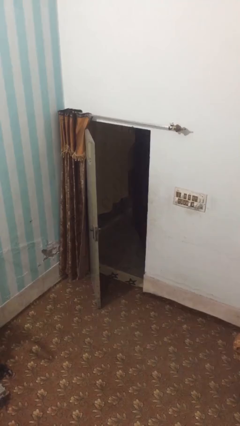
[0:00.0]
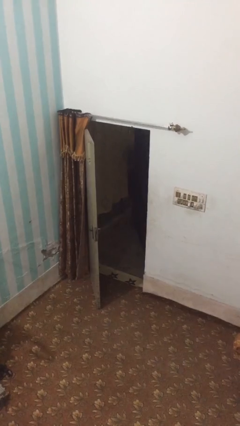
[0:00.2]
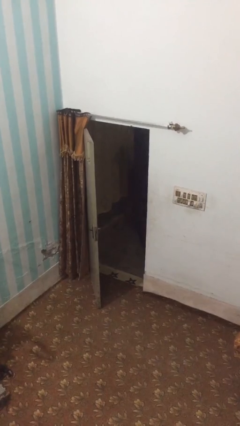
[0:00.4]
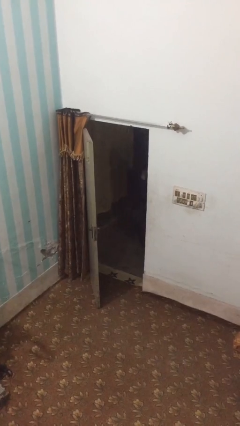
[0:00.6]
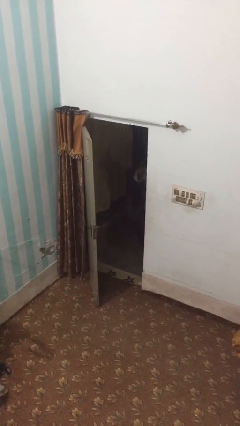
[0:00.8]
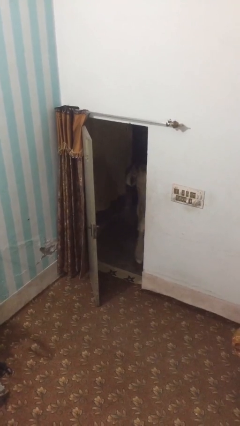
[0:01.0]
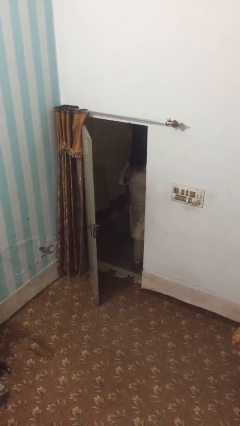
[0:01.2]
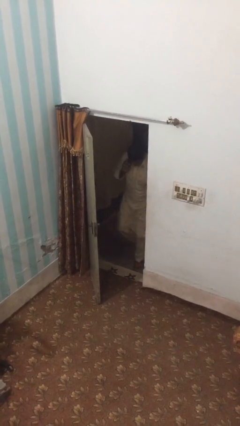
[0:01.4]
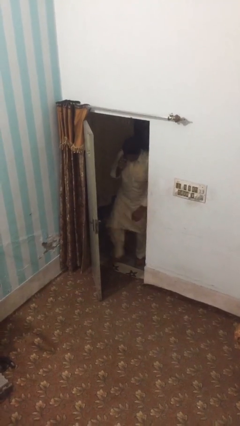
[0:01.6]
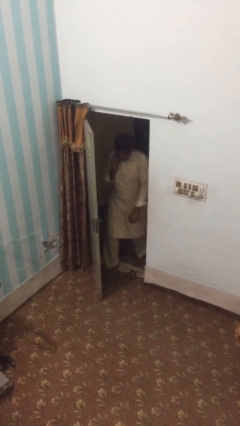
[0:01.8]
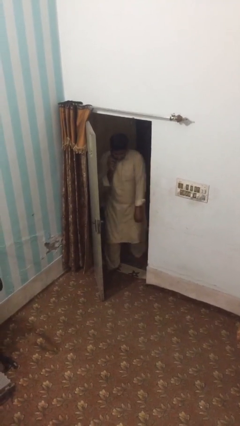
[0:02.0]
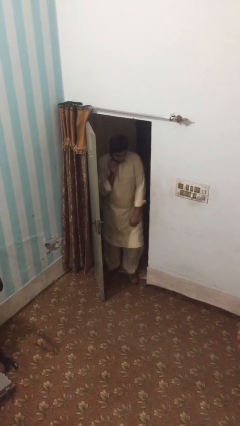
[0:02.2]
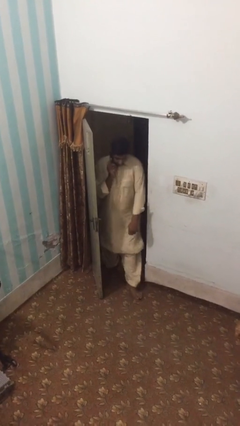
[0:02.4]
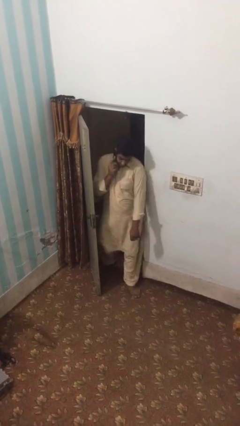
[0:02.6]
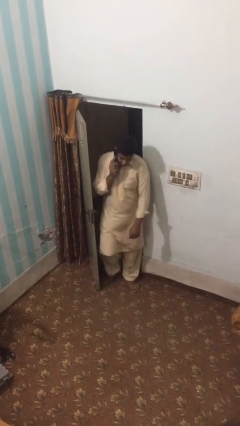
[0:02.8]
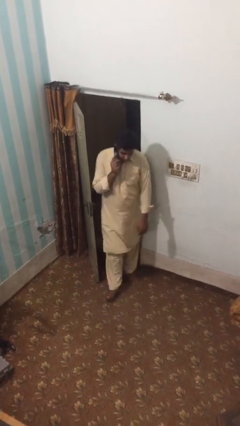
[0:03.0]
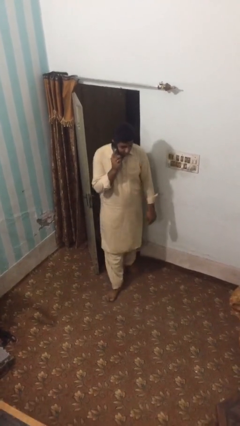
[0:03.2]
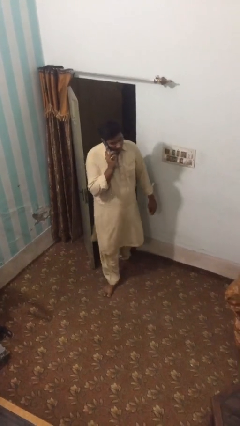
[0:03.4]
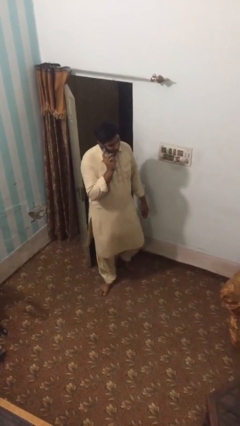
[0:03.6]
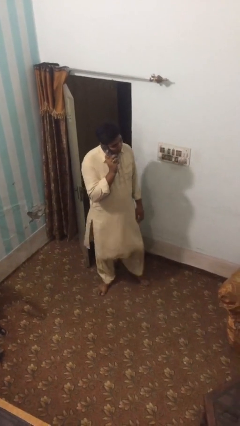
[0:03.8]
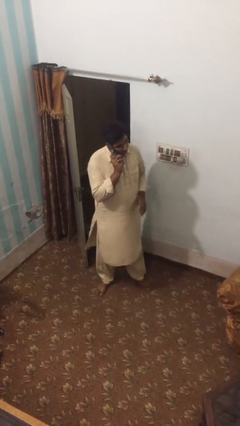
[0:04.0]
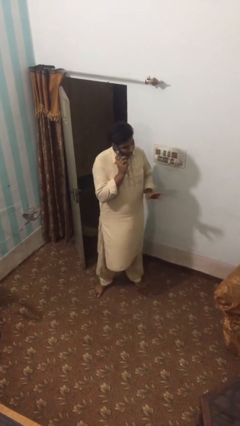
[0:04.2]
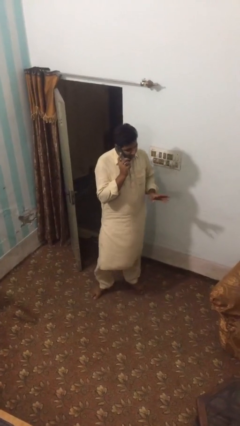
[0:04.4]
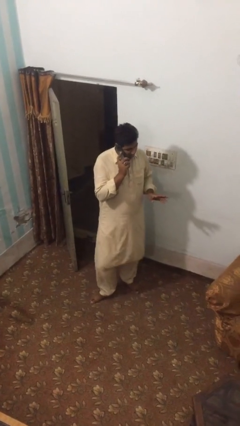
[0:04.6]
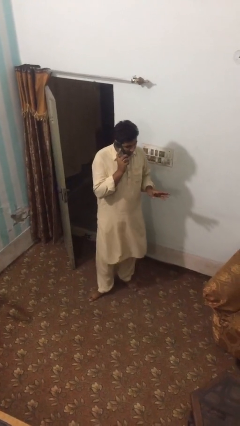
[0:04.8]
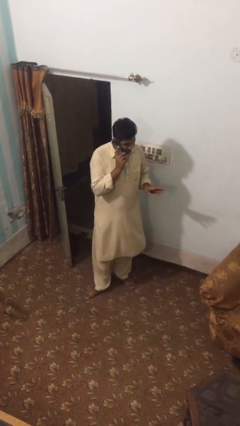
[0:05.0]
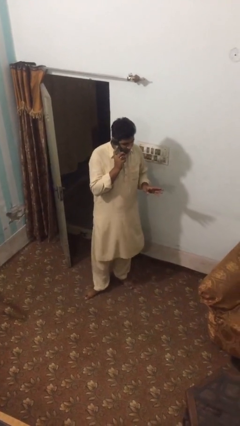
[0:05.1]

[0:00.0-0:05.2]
person enters scene through structure

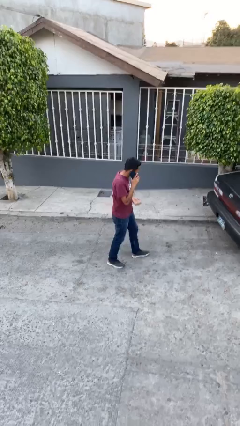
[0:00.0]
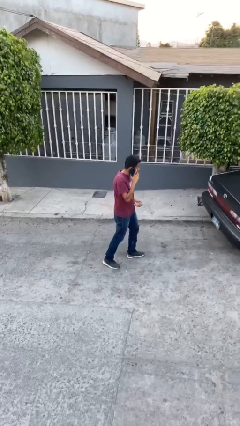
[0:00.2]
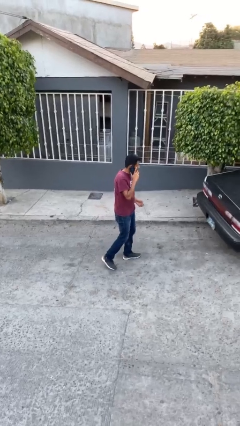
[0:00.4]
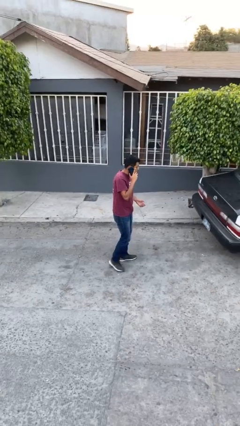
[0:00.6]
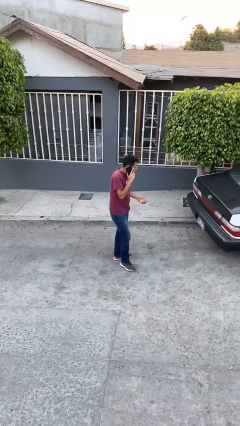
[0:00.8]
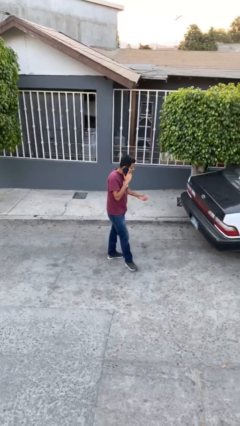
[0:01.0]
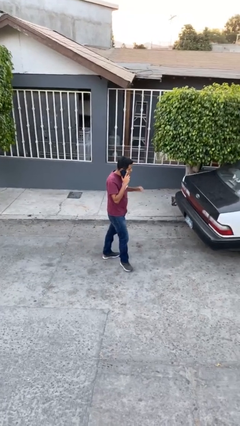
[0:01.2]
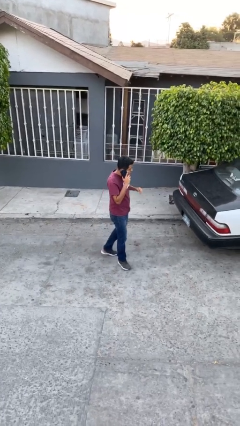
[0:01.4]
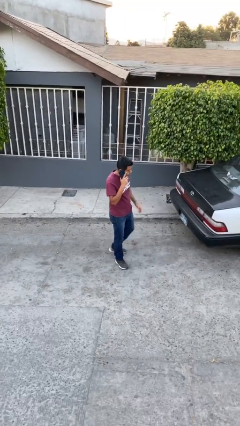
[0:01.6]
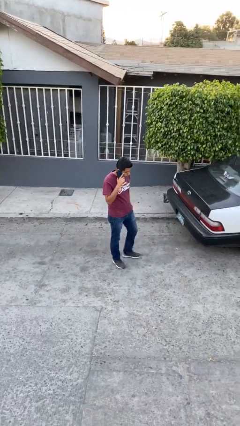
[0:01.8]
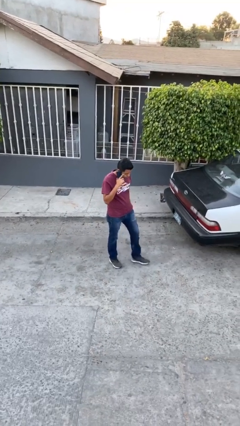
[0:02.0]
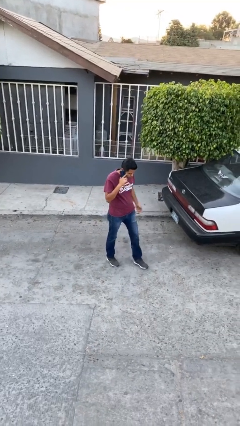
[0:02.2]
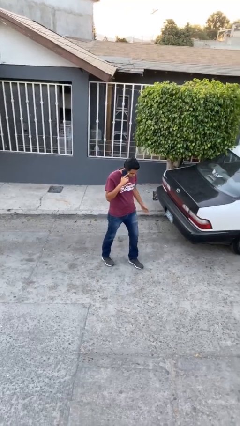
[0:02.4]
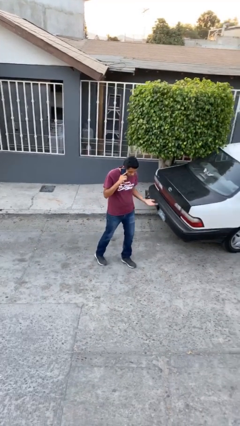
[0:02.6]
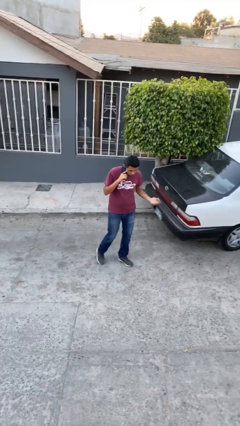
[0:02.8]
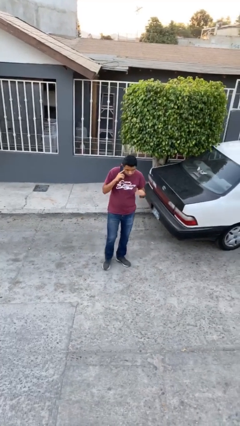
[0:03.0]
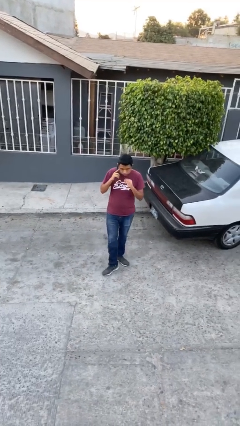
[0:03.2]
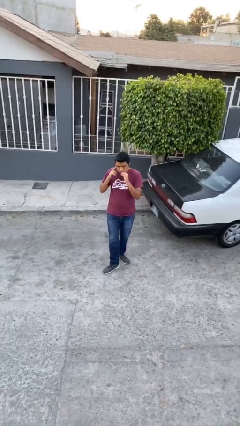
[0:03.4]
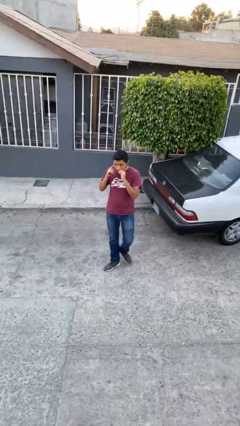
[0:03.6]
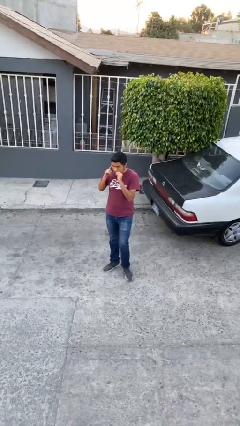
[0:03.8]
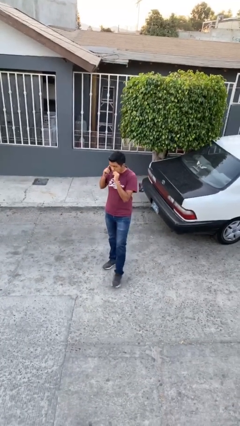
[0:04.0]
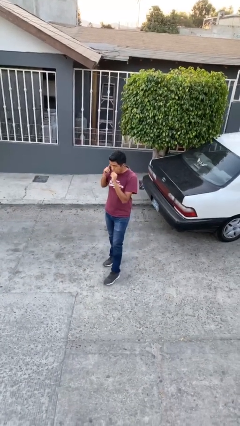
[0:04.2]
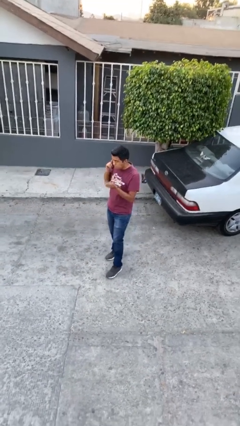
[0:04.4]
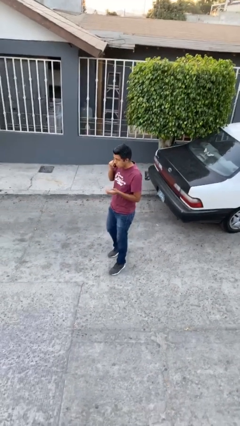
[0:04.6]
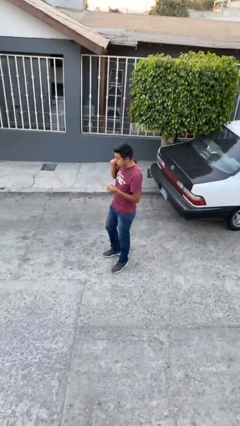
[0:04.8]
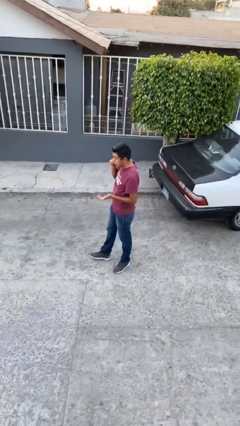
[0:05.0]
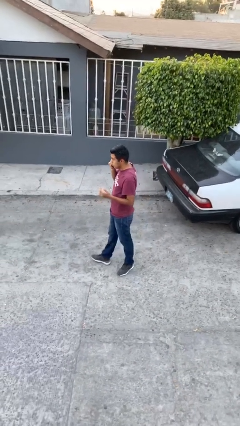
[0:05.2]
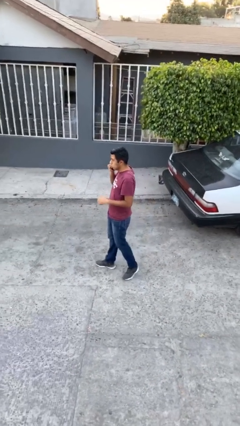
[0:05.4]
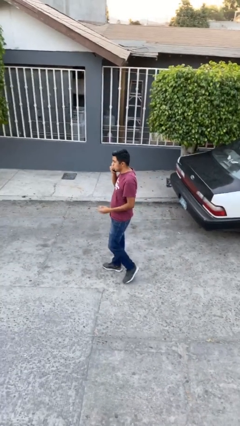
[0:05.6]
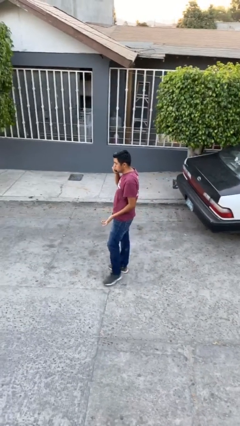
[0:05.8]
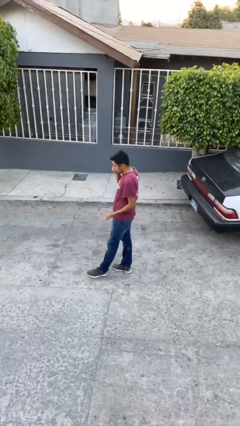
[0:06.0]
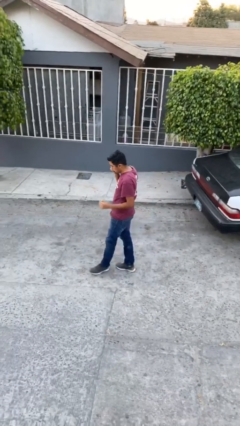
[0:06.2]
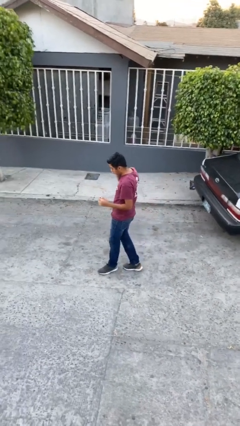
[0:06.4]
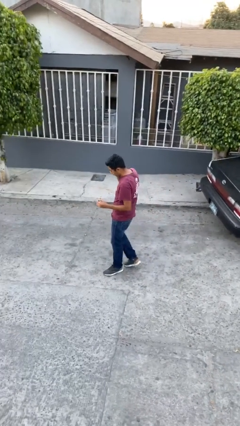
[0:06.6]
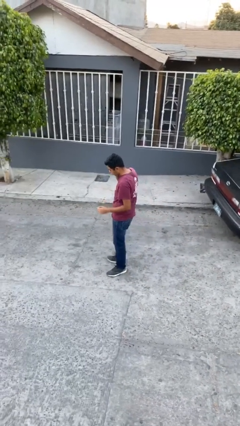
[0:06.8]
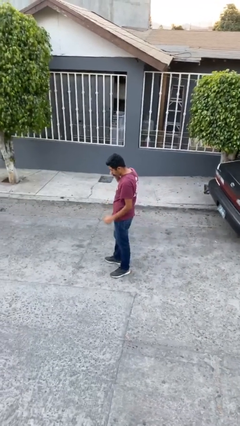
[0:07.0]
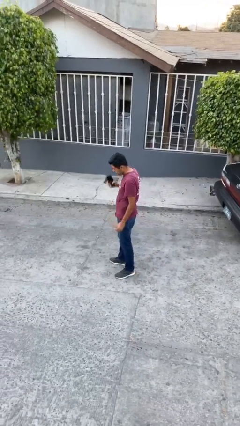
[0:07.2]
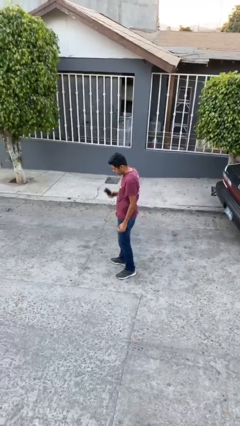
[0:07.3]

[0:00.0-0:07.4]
person talks on phone

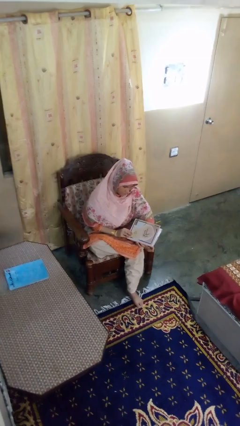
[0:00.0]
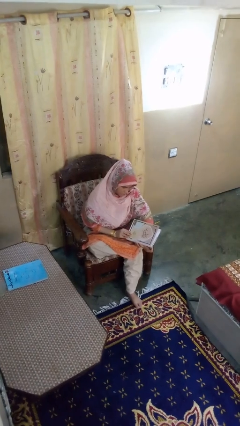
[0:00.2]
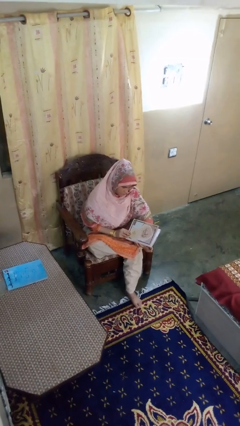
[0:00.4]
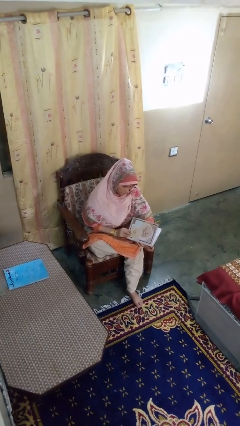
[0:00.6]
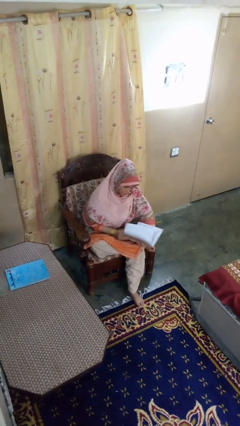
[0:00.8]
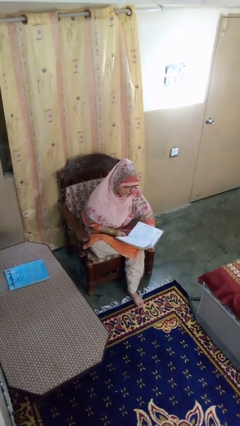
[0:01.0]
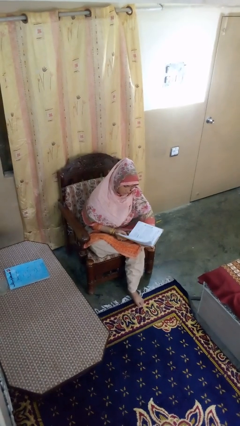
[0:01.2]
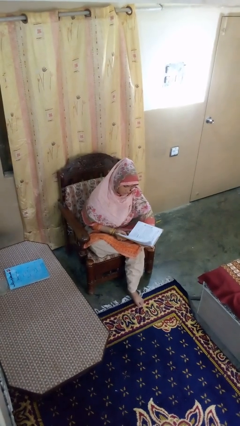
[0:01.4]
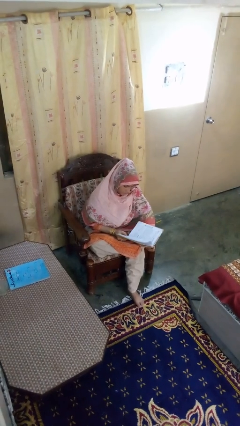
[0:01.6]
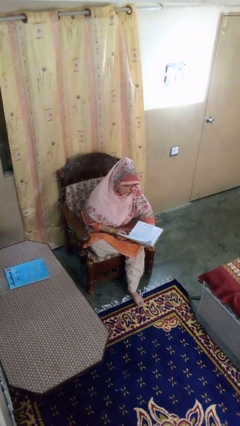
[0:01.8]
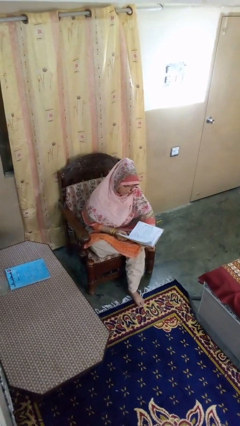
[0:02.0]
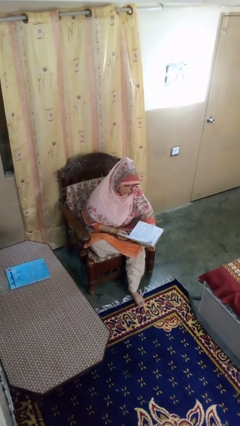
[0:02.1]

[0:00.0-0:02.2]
person reads book

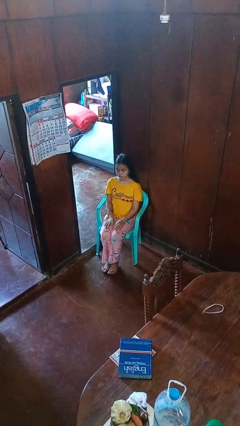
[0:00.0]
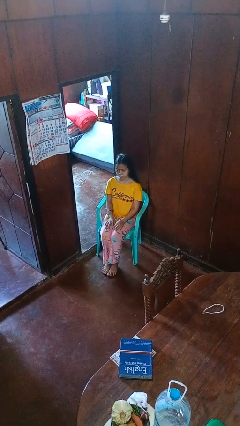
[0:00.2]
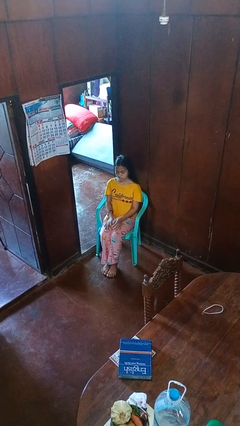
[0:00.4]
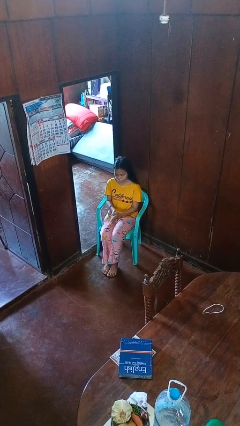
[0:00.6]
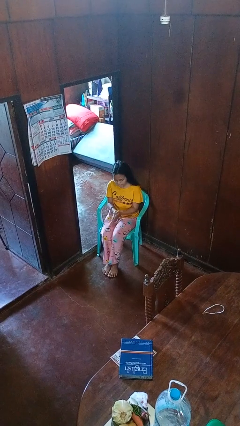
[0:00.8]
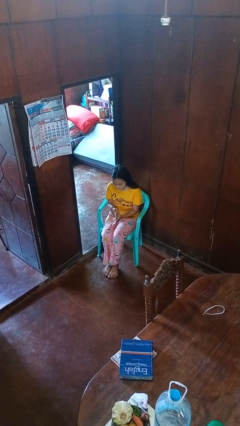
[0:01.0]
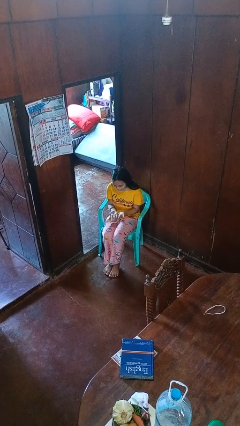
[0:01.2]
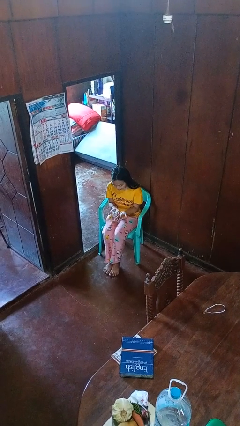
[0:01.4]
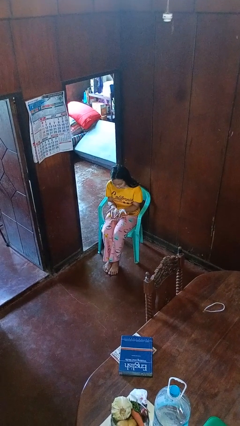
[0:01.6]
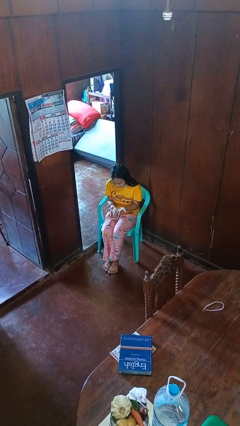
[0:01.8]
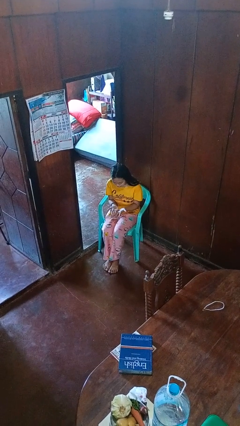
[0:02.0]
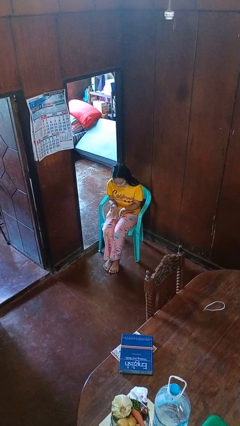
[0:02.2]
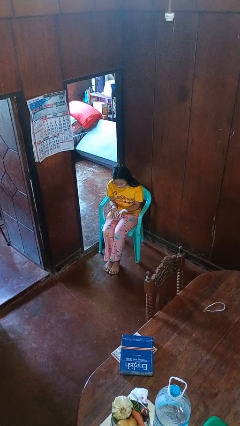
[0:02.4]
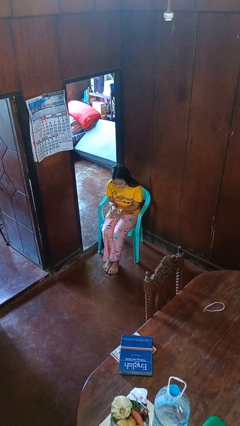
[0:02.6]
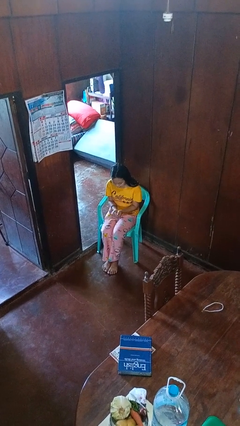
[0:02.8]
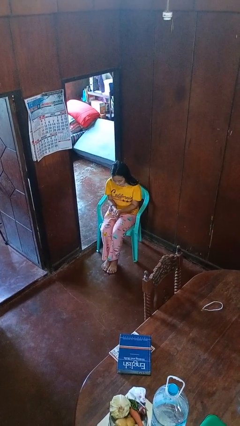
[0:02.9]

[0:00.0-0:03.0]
person looks at hands in lap
